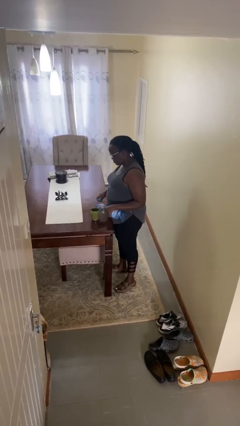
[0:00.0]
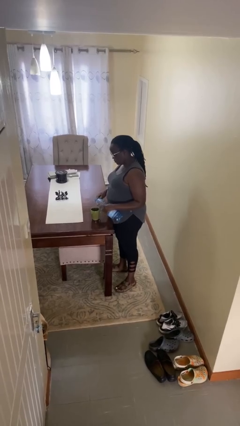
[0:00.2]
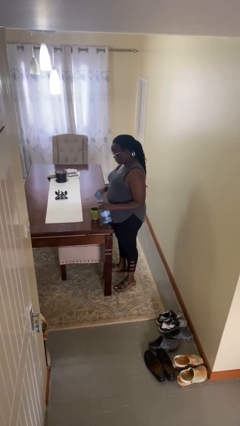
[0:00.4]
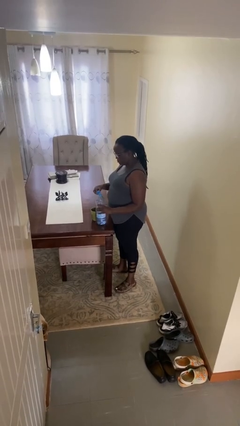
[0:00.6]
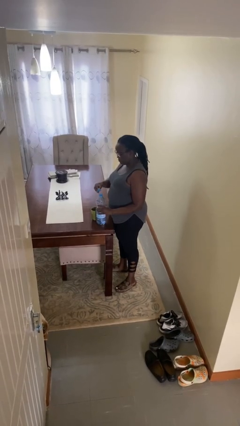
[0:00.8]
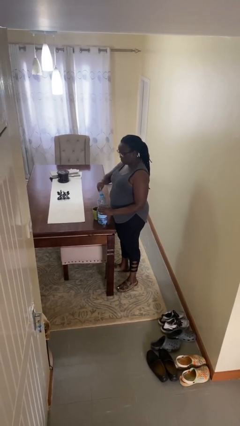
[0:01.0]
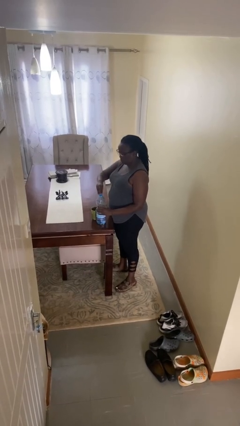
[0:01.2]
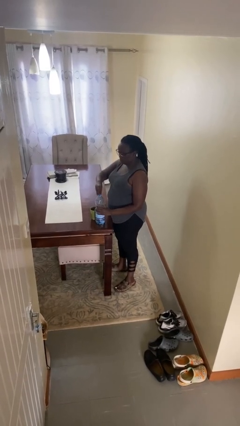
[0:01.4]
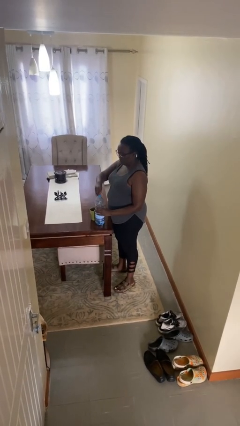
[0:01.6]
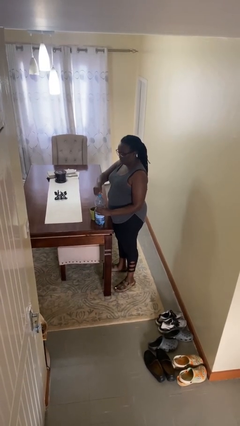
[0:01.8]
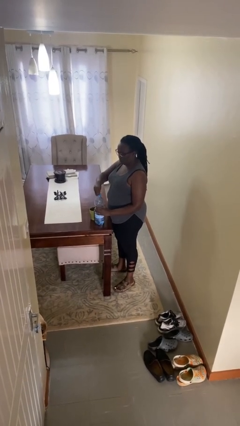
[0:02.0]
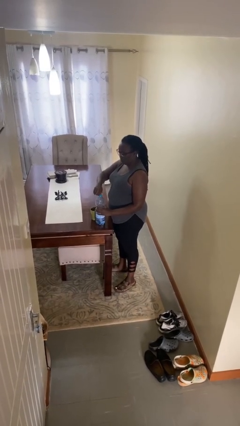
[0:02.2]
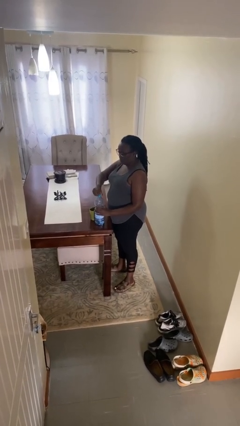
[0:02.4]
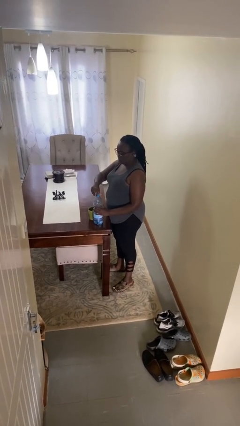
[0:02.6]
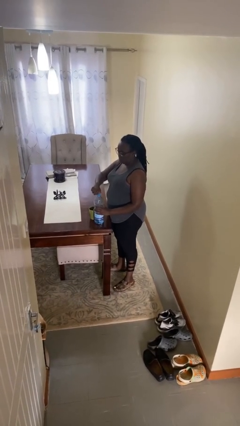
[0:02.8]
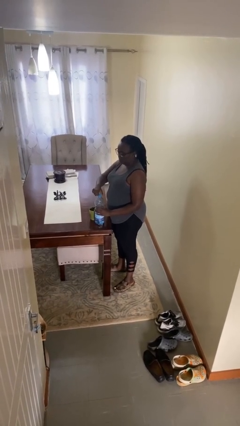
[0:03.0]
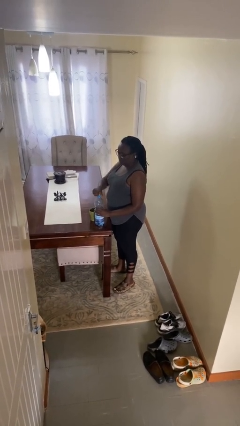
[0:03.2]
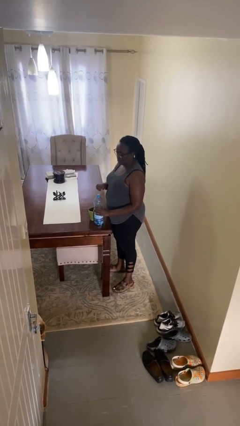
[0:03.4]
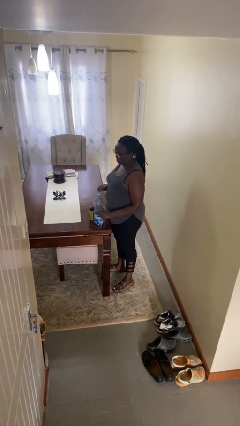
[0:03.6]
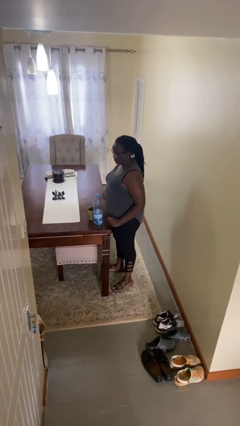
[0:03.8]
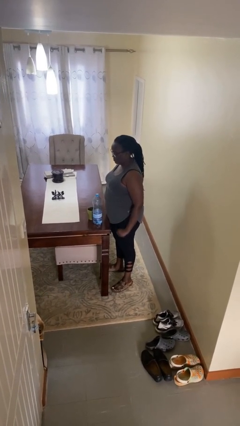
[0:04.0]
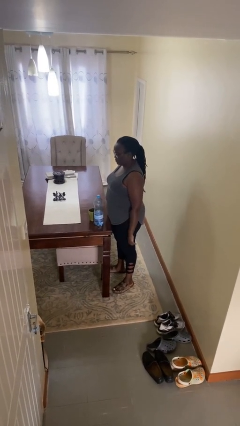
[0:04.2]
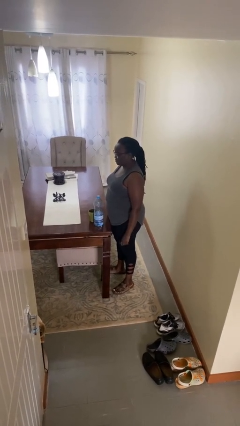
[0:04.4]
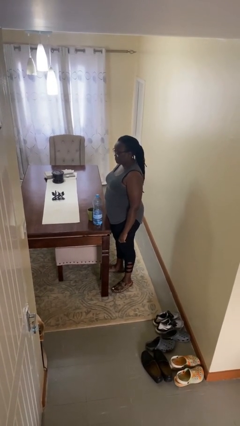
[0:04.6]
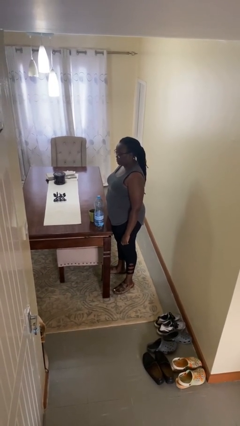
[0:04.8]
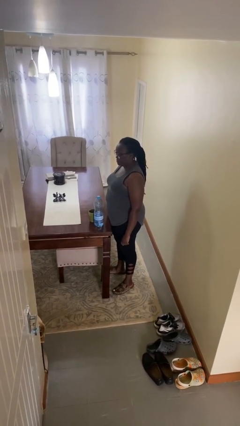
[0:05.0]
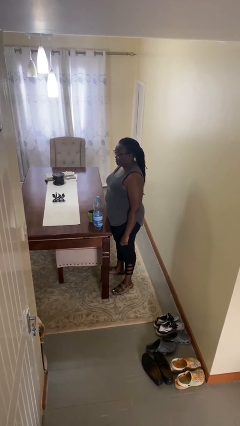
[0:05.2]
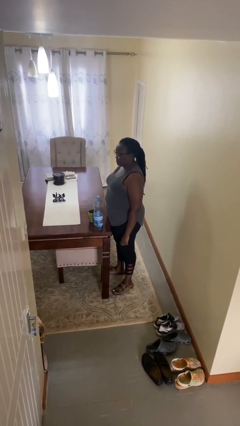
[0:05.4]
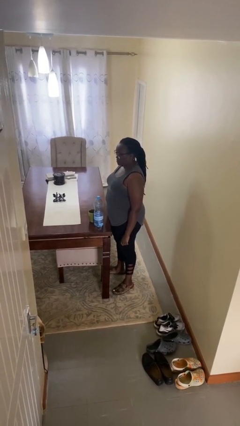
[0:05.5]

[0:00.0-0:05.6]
person screws lid to bottle

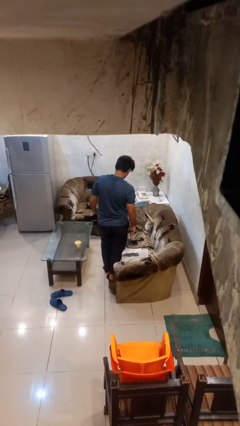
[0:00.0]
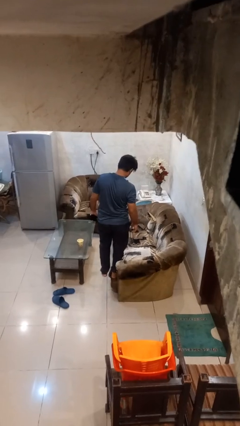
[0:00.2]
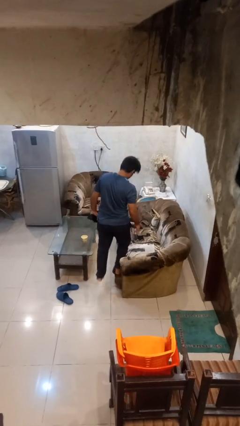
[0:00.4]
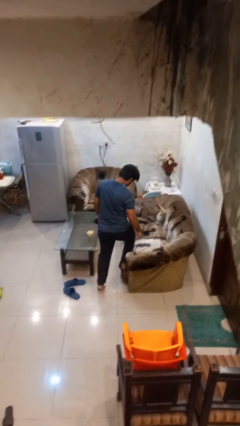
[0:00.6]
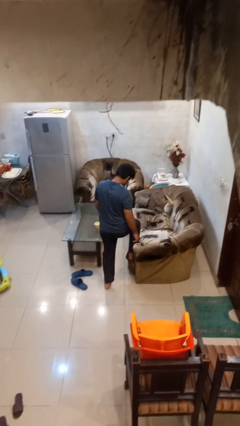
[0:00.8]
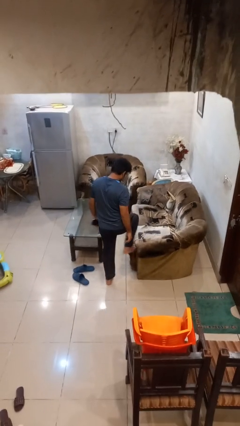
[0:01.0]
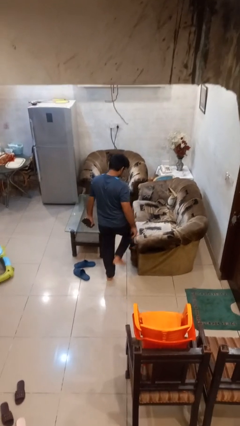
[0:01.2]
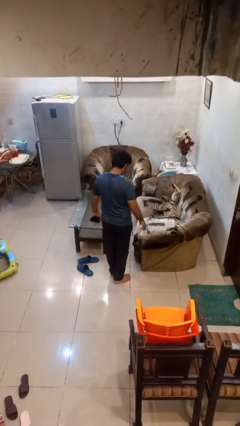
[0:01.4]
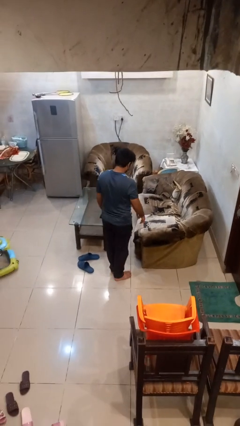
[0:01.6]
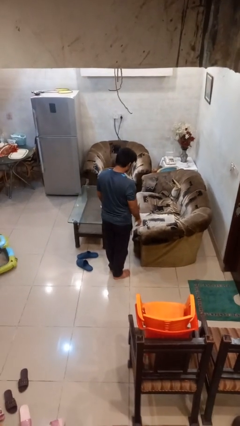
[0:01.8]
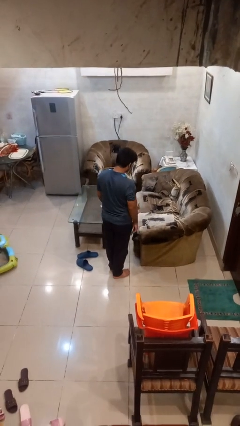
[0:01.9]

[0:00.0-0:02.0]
person climbs off couch

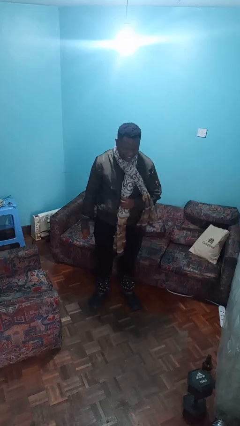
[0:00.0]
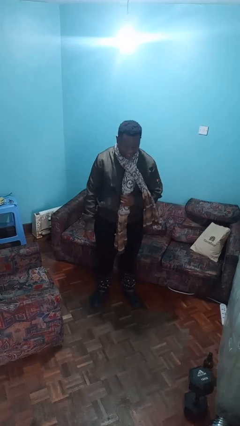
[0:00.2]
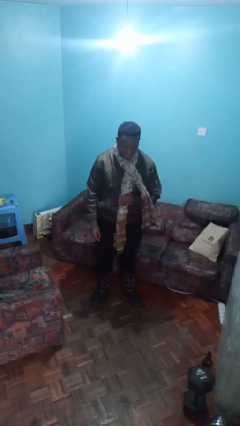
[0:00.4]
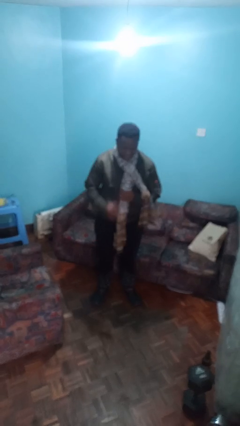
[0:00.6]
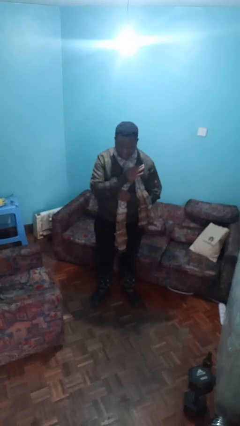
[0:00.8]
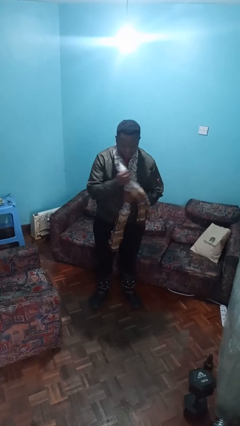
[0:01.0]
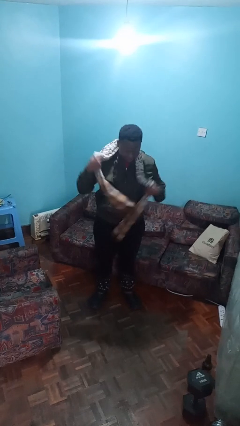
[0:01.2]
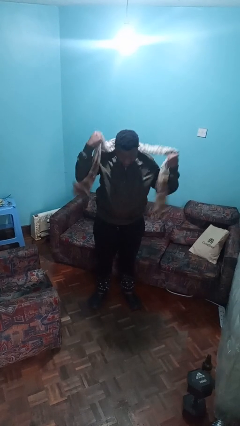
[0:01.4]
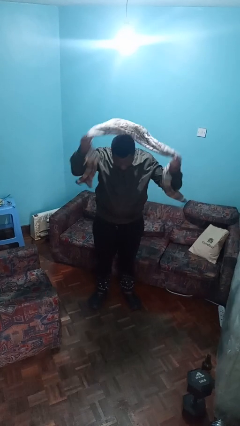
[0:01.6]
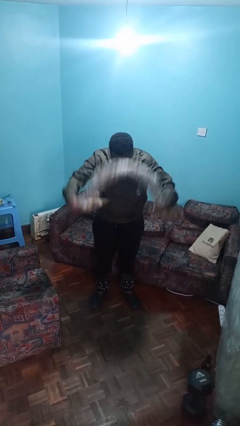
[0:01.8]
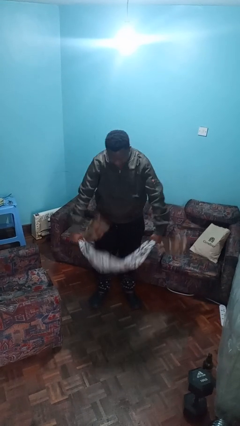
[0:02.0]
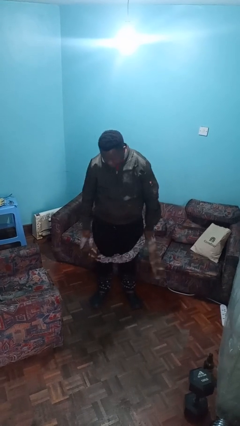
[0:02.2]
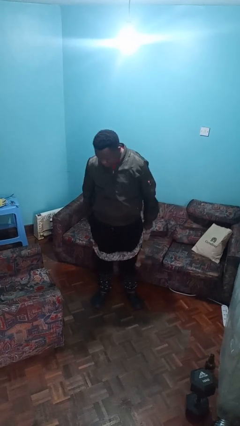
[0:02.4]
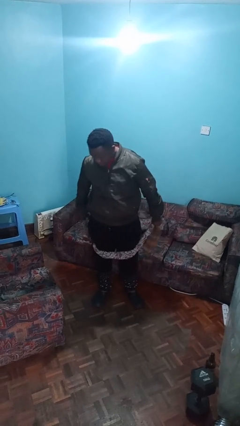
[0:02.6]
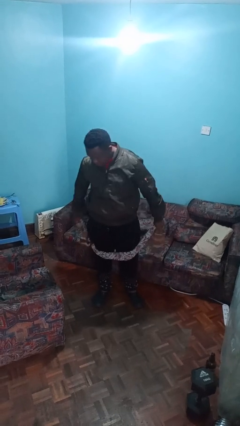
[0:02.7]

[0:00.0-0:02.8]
person takes off scarf

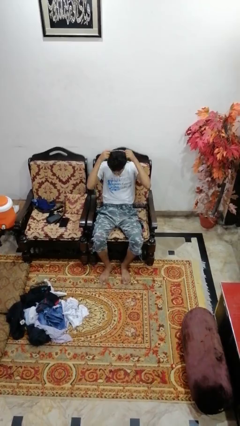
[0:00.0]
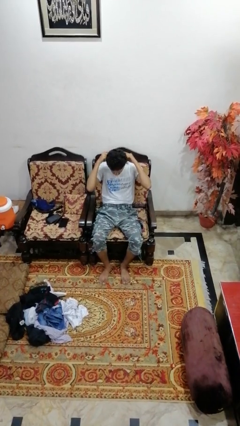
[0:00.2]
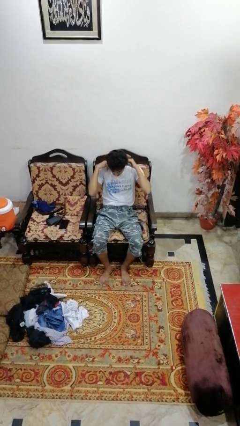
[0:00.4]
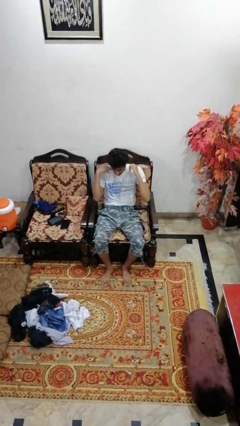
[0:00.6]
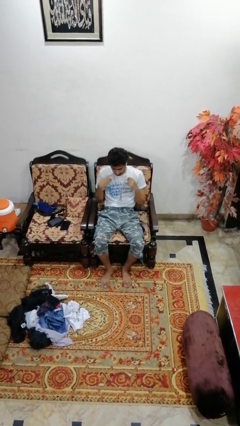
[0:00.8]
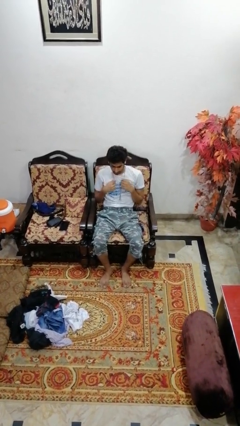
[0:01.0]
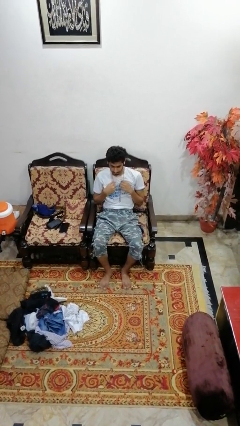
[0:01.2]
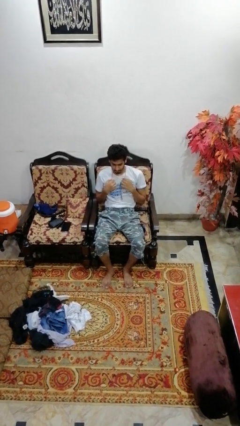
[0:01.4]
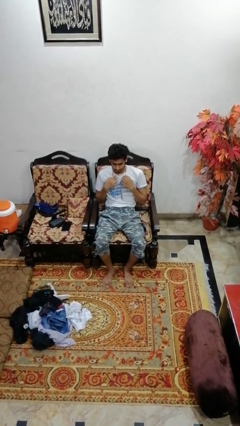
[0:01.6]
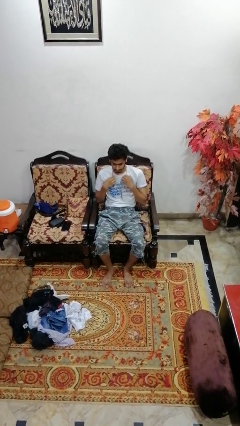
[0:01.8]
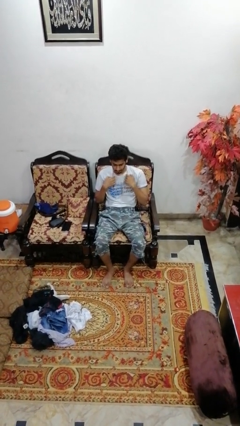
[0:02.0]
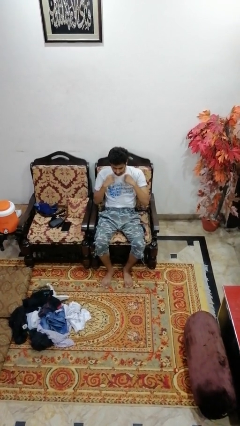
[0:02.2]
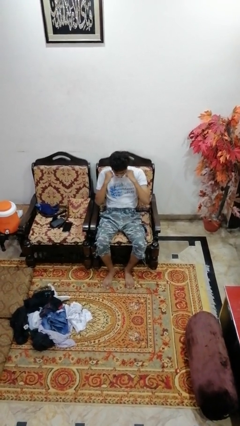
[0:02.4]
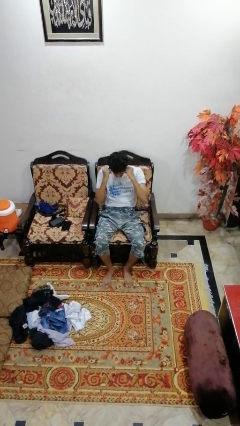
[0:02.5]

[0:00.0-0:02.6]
person puts on necklace

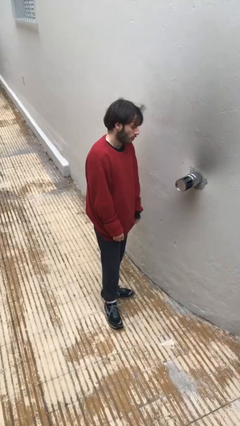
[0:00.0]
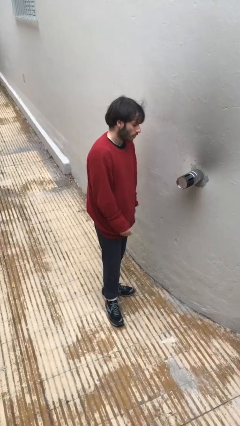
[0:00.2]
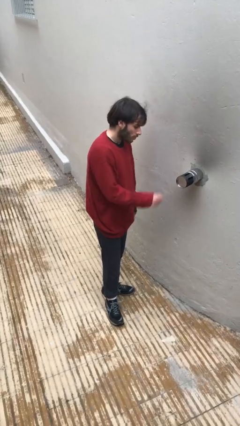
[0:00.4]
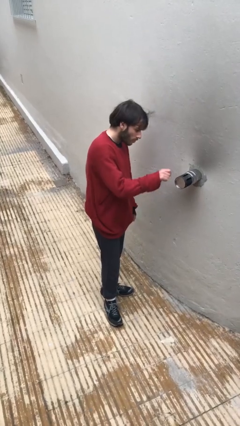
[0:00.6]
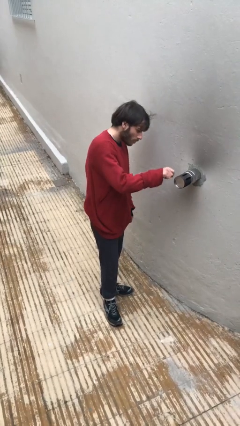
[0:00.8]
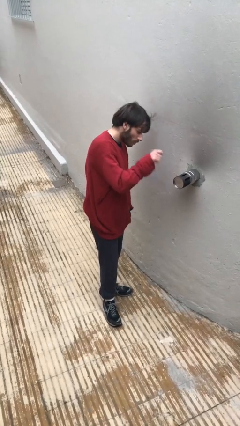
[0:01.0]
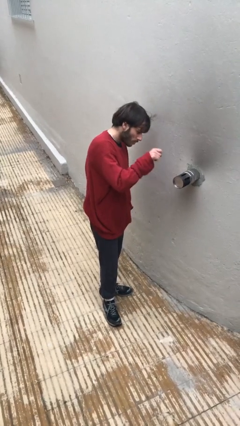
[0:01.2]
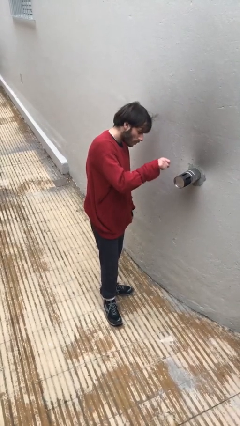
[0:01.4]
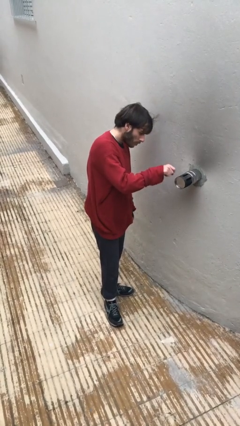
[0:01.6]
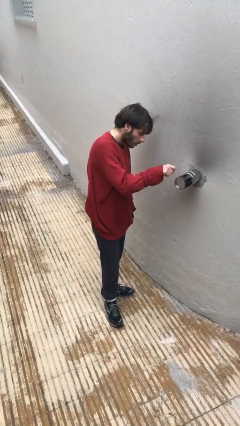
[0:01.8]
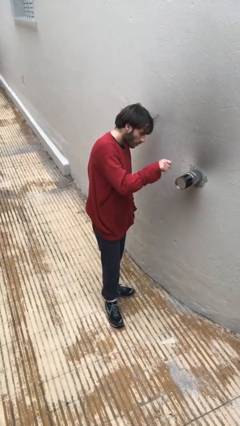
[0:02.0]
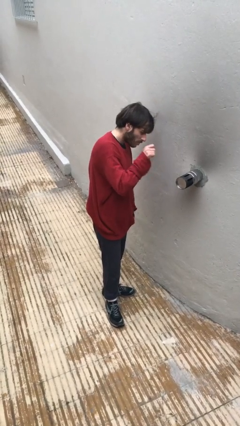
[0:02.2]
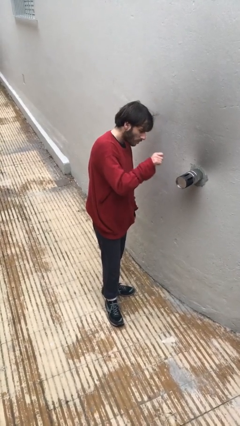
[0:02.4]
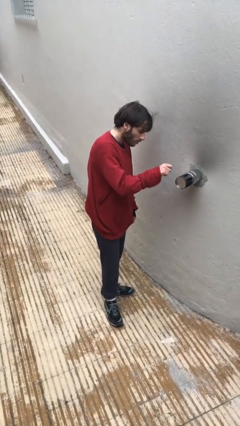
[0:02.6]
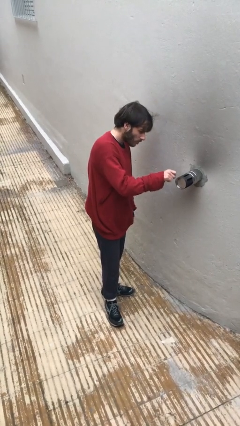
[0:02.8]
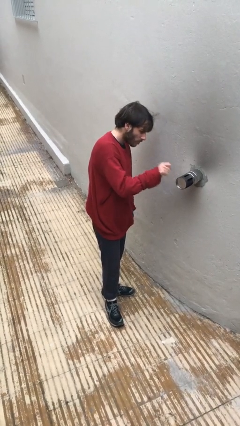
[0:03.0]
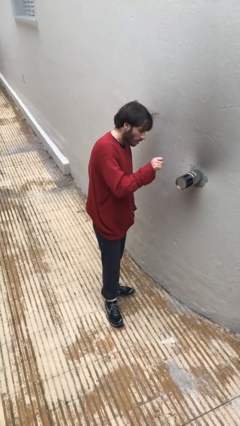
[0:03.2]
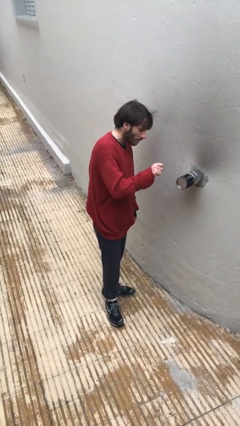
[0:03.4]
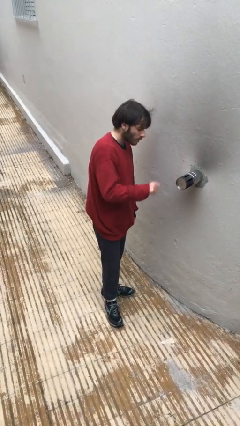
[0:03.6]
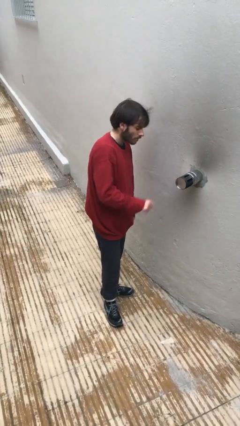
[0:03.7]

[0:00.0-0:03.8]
person taps object with finger

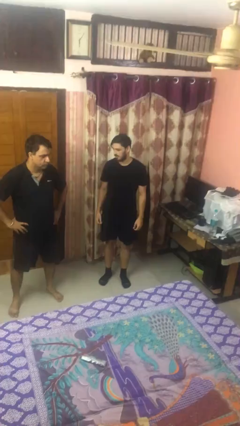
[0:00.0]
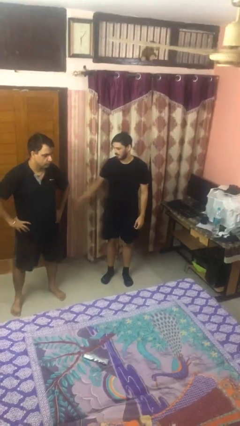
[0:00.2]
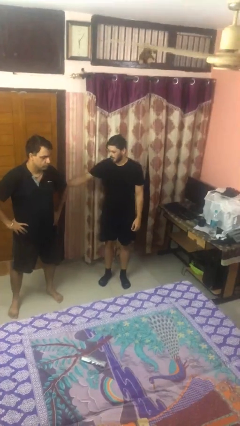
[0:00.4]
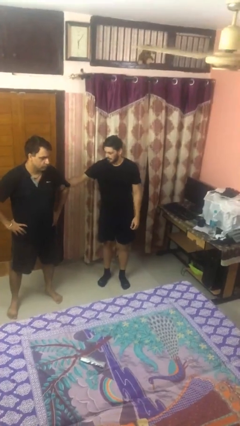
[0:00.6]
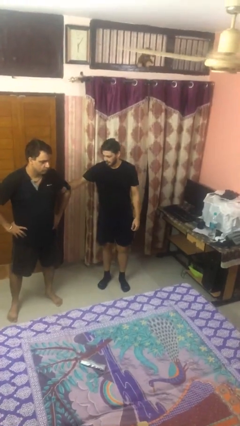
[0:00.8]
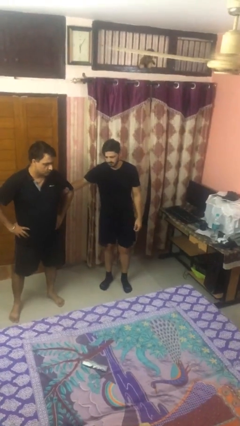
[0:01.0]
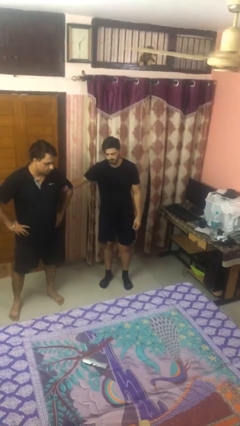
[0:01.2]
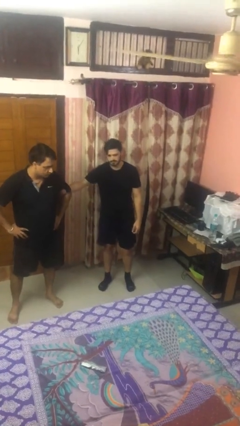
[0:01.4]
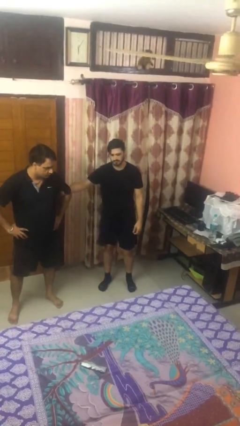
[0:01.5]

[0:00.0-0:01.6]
person grabs person by bicep
